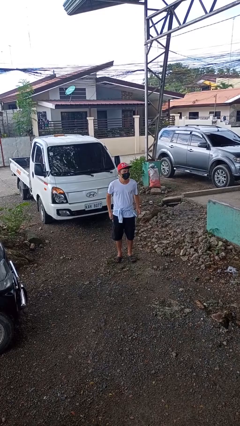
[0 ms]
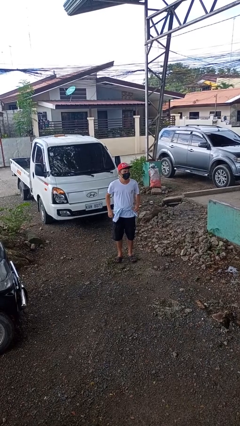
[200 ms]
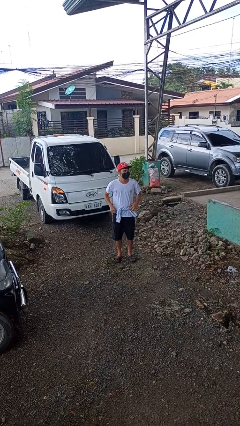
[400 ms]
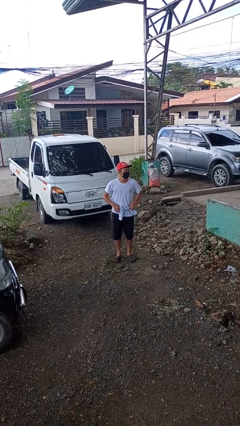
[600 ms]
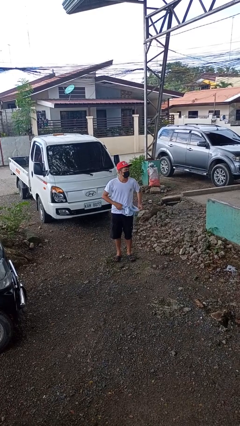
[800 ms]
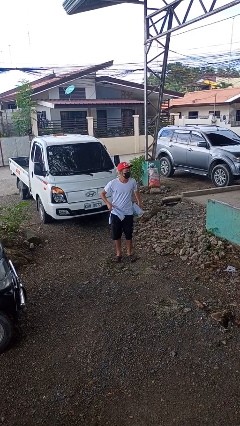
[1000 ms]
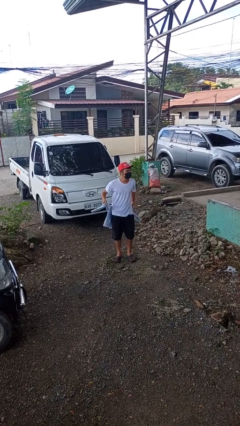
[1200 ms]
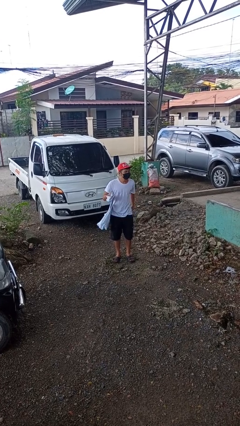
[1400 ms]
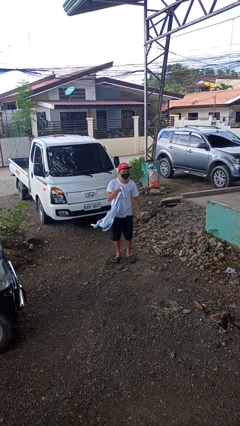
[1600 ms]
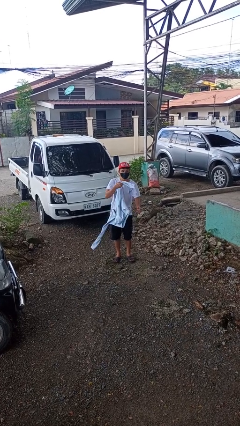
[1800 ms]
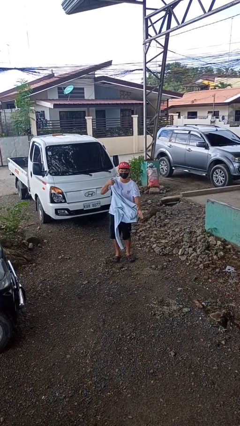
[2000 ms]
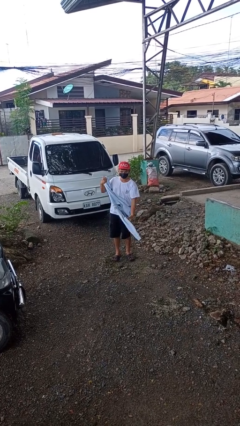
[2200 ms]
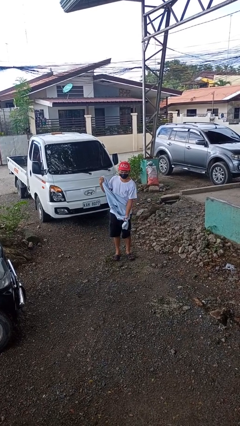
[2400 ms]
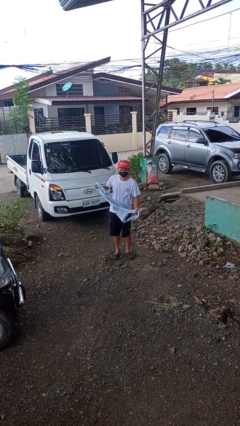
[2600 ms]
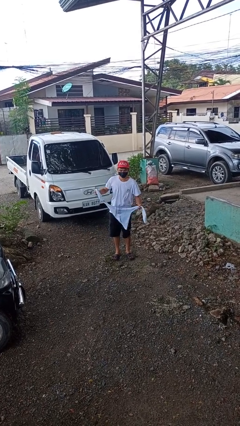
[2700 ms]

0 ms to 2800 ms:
person unties jacket around waist

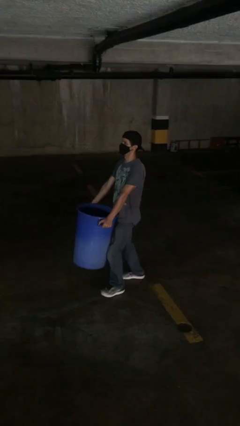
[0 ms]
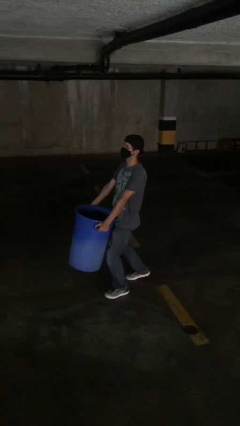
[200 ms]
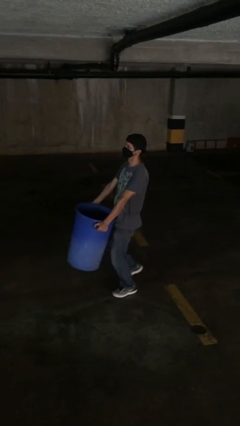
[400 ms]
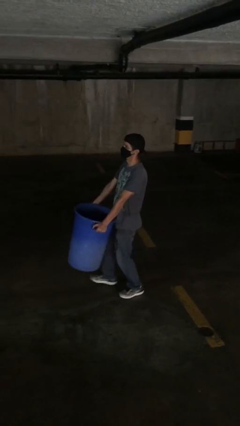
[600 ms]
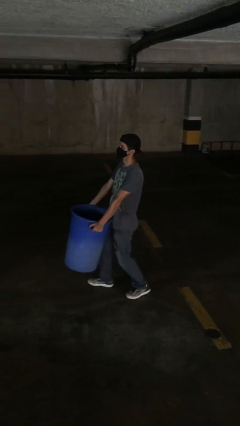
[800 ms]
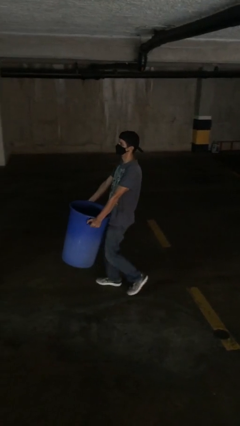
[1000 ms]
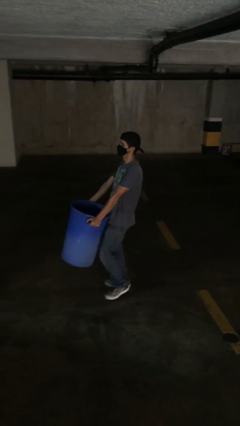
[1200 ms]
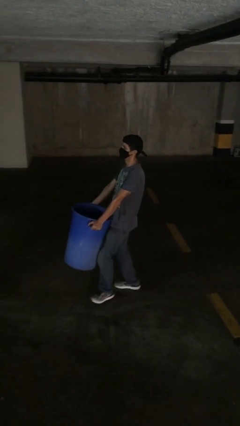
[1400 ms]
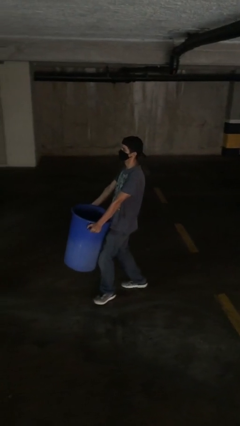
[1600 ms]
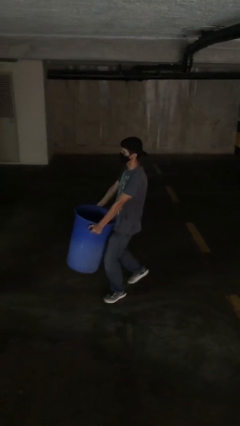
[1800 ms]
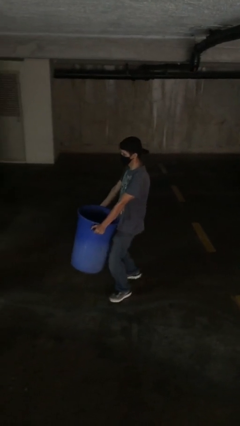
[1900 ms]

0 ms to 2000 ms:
person carries heavy object

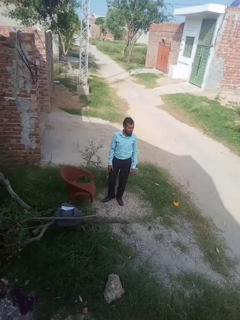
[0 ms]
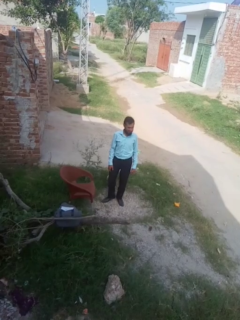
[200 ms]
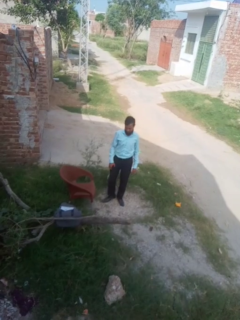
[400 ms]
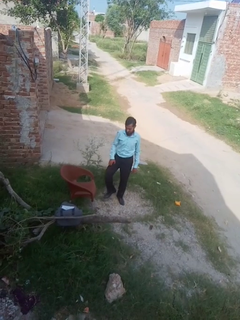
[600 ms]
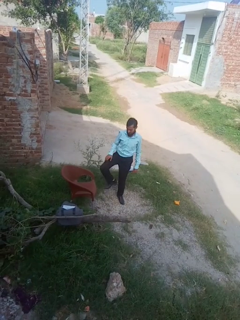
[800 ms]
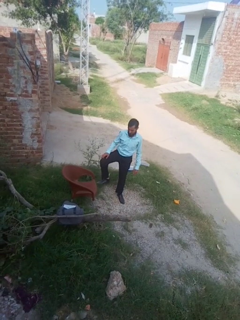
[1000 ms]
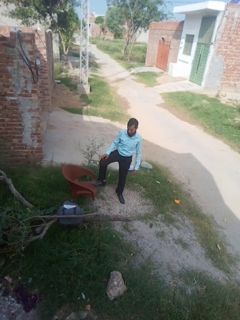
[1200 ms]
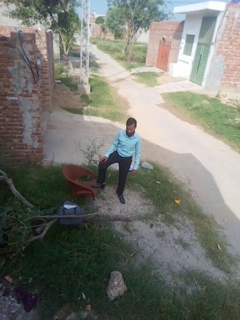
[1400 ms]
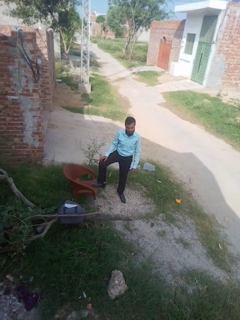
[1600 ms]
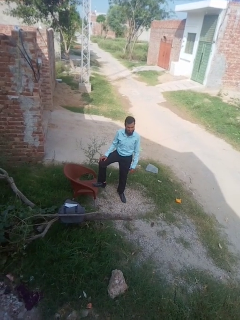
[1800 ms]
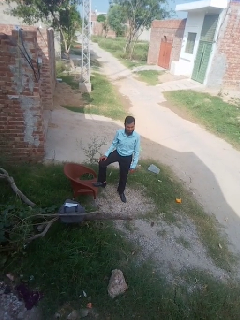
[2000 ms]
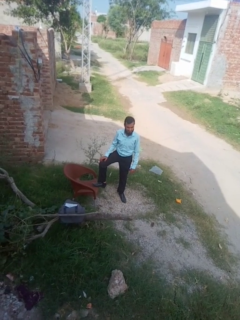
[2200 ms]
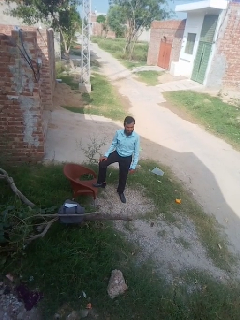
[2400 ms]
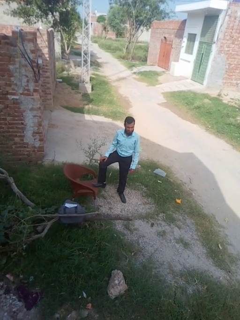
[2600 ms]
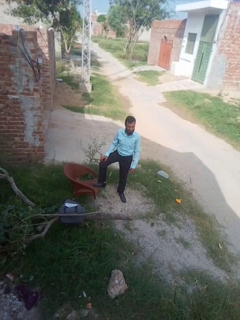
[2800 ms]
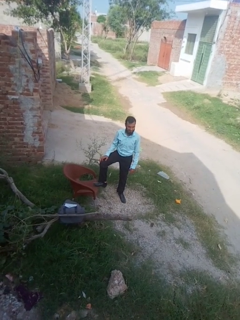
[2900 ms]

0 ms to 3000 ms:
person puts feet up

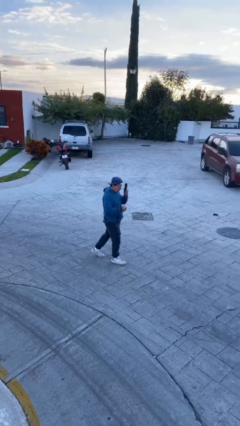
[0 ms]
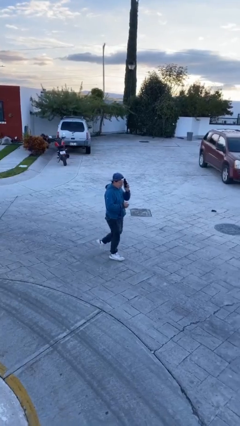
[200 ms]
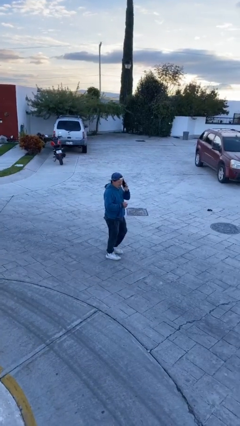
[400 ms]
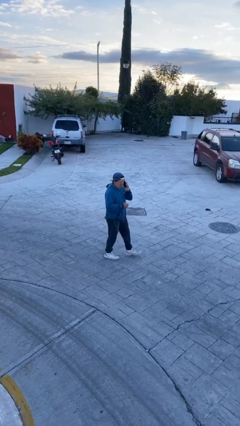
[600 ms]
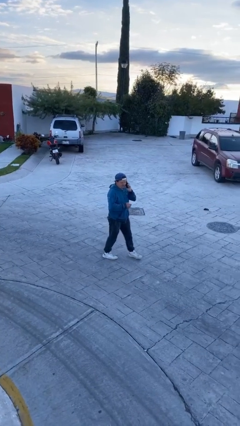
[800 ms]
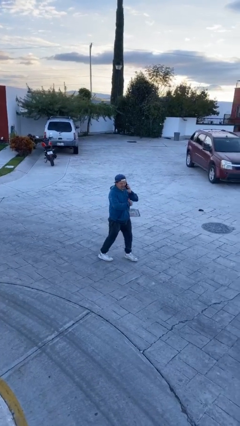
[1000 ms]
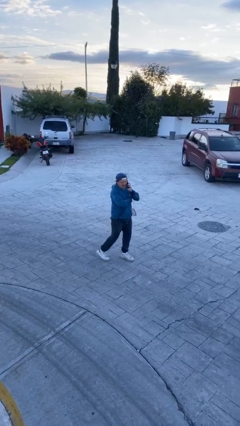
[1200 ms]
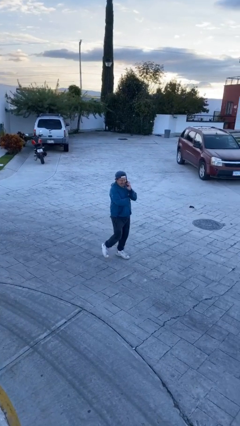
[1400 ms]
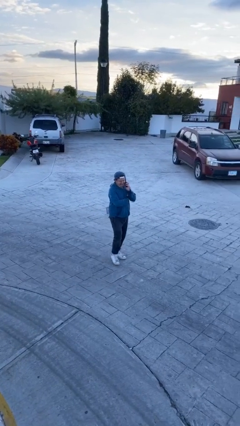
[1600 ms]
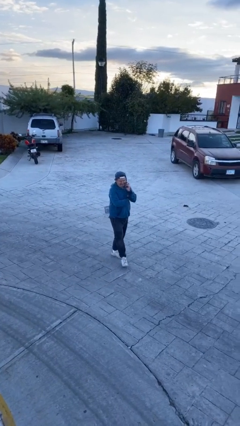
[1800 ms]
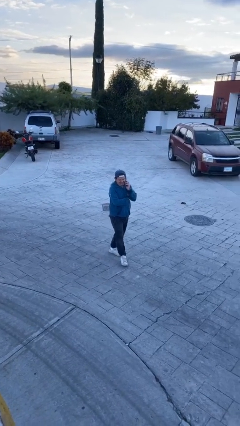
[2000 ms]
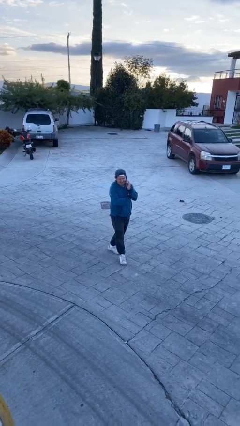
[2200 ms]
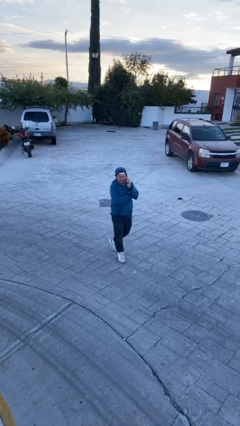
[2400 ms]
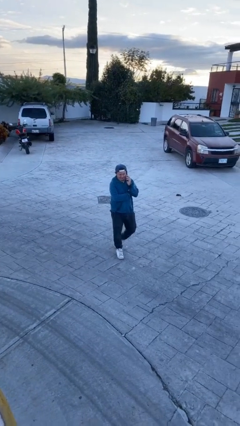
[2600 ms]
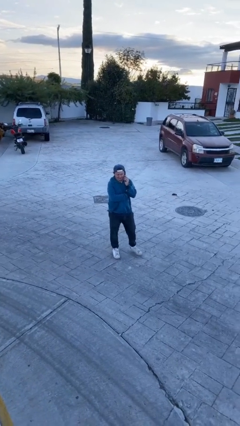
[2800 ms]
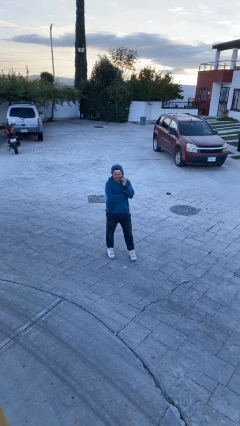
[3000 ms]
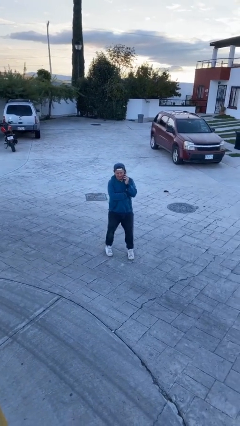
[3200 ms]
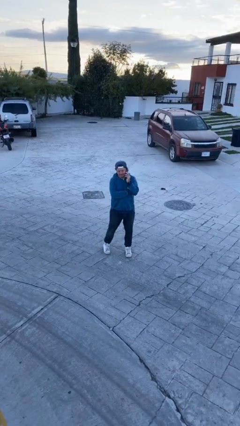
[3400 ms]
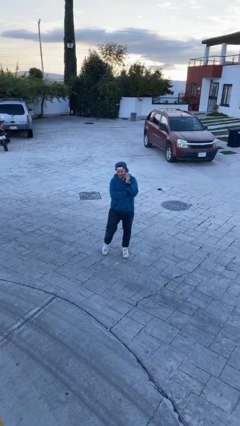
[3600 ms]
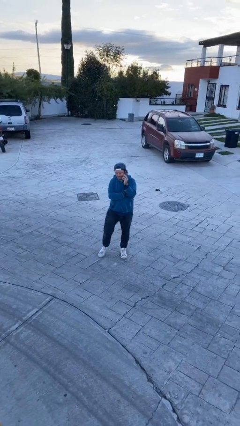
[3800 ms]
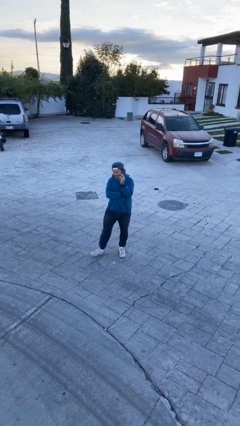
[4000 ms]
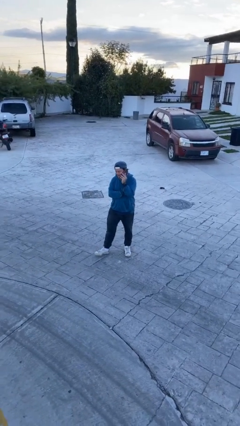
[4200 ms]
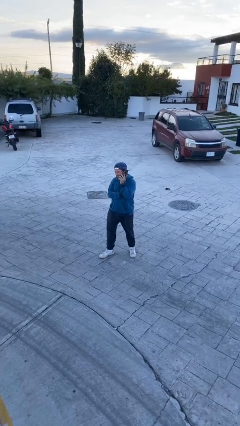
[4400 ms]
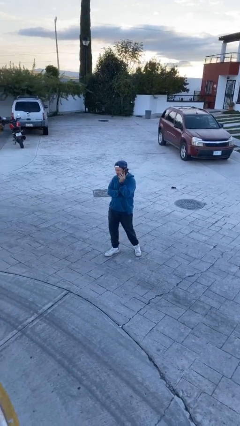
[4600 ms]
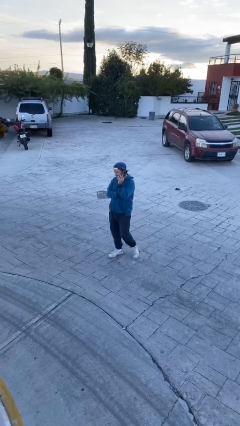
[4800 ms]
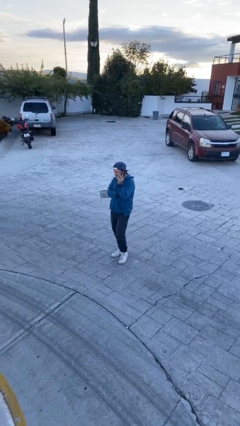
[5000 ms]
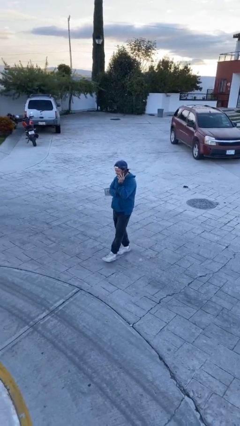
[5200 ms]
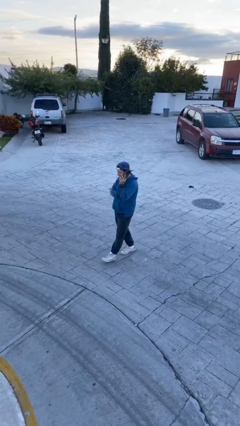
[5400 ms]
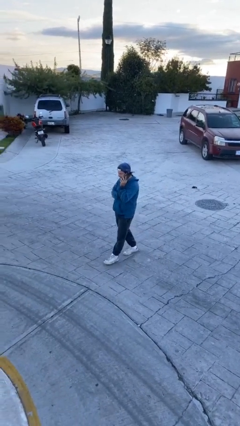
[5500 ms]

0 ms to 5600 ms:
person talks on phone

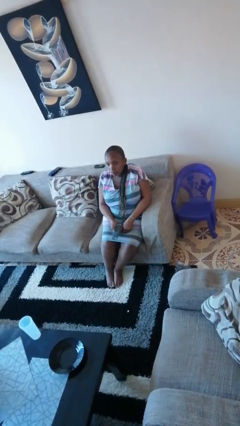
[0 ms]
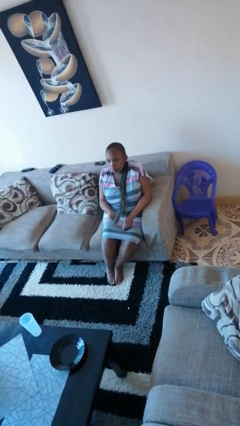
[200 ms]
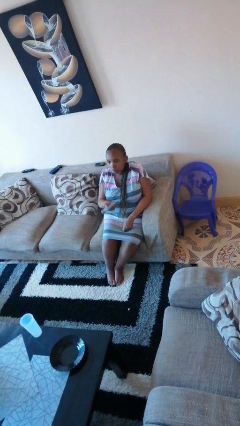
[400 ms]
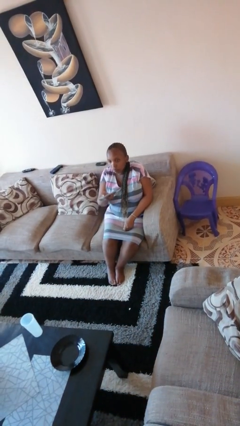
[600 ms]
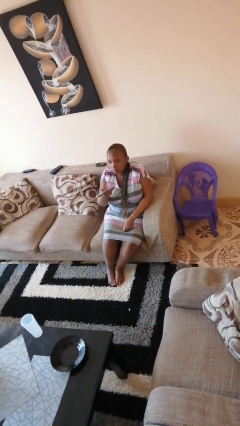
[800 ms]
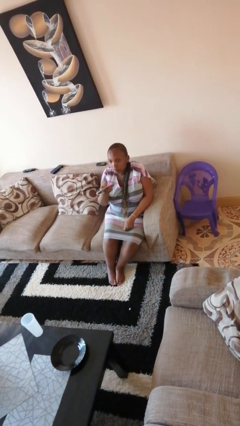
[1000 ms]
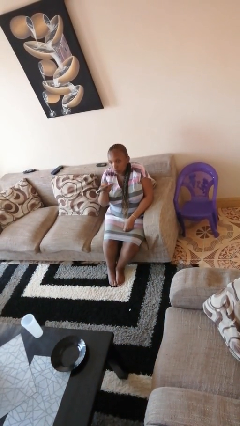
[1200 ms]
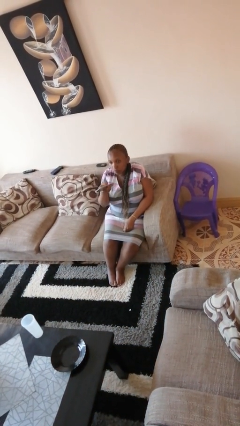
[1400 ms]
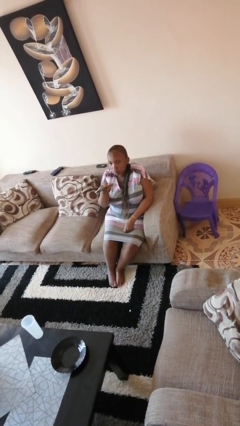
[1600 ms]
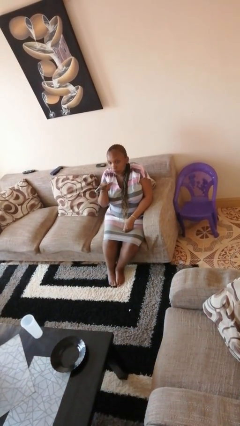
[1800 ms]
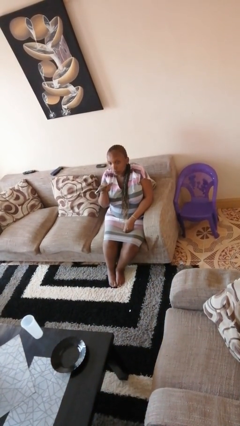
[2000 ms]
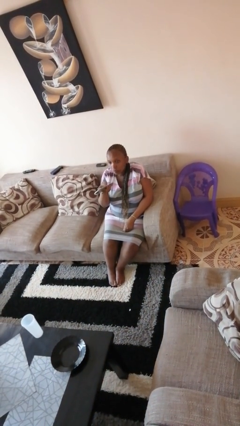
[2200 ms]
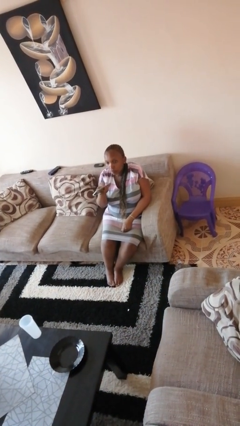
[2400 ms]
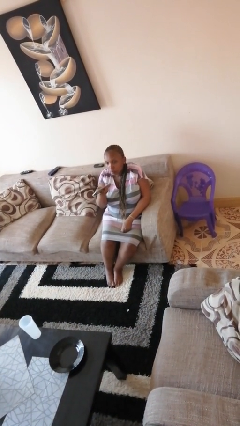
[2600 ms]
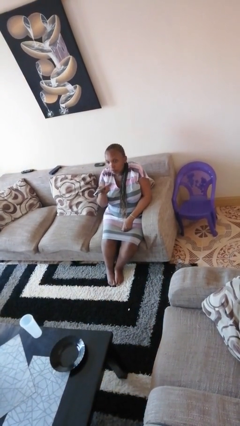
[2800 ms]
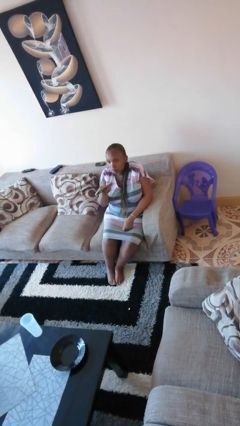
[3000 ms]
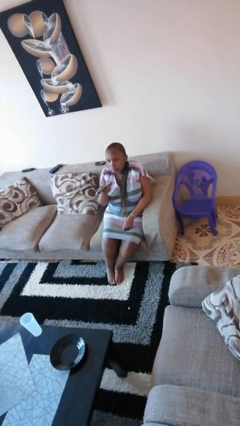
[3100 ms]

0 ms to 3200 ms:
person uses television remote

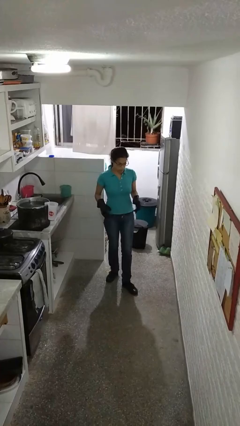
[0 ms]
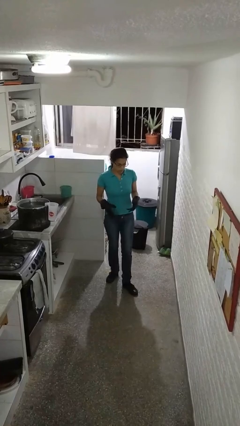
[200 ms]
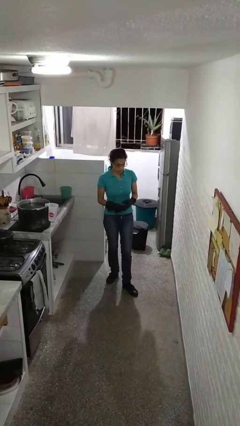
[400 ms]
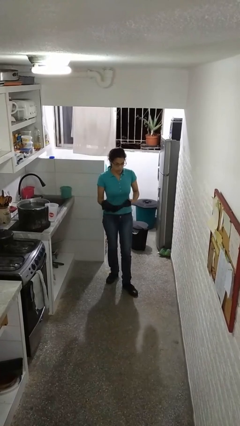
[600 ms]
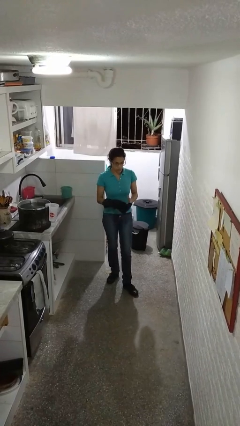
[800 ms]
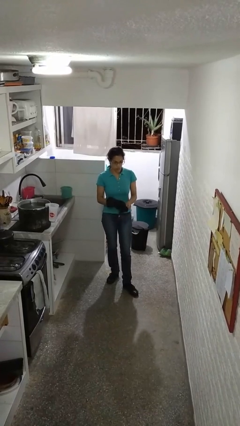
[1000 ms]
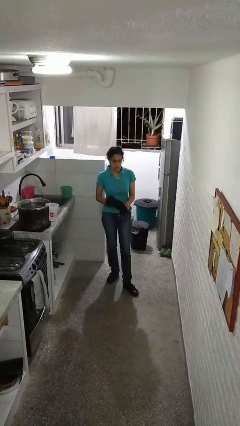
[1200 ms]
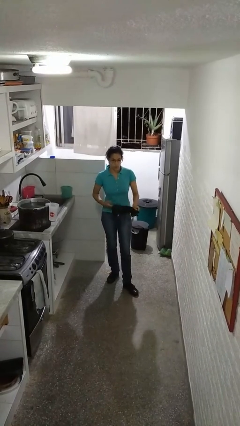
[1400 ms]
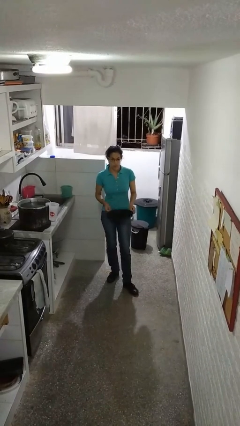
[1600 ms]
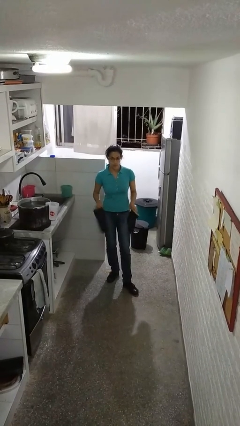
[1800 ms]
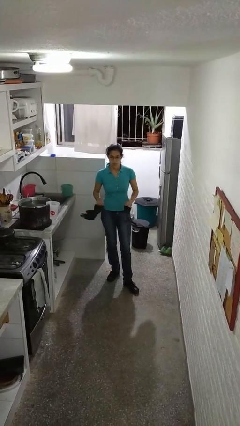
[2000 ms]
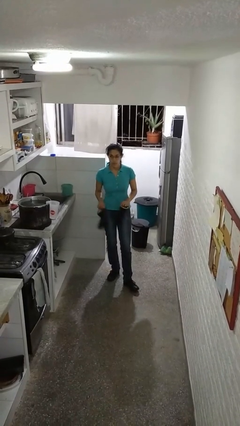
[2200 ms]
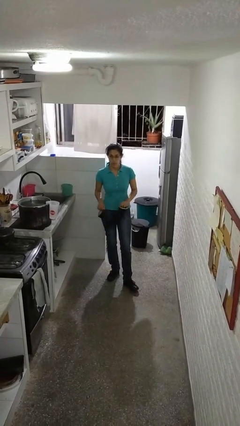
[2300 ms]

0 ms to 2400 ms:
person takes off gloves
